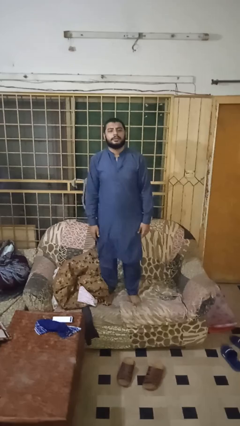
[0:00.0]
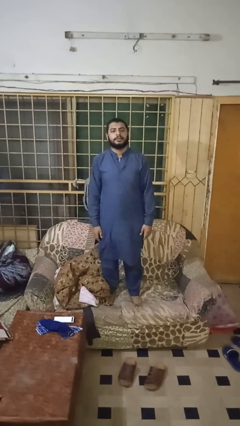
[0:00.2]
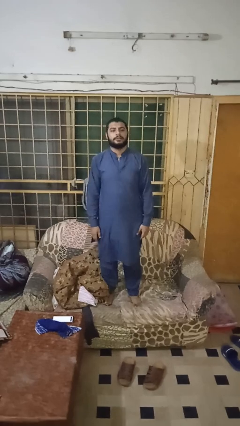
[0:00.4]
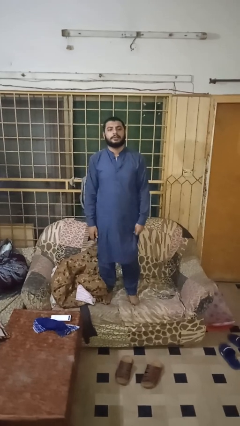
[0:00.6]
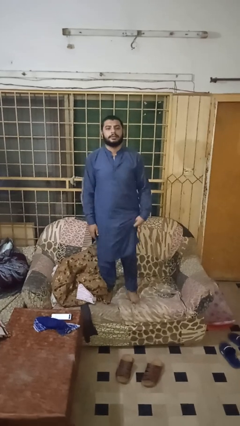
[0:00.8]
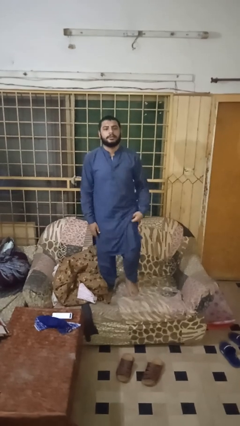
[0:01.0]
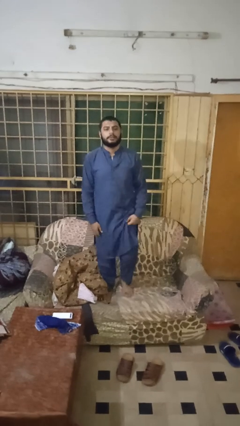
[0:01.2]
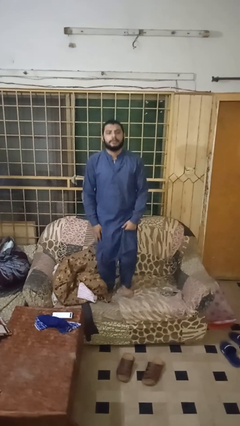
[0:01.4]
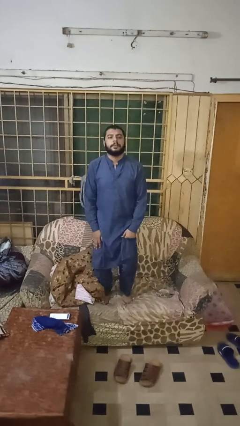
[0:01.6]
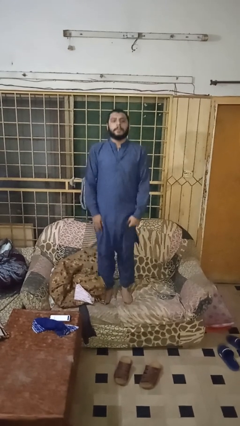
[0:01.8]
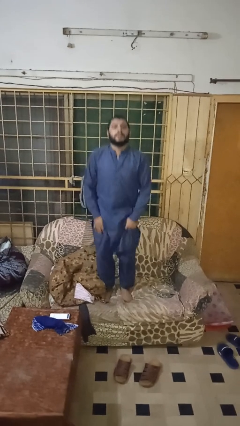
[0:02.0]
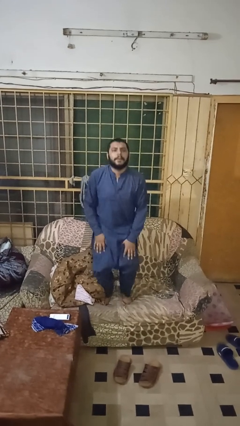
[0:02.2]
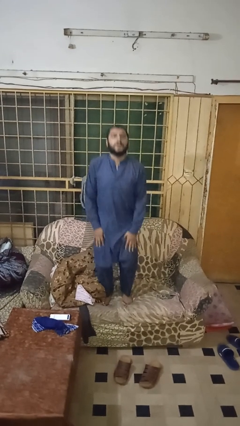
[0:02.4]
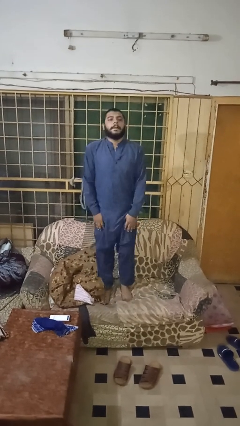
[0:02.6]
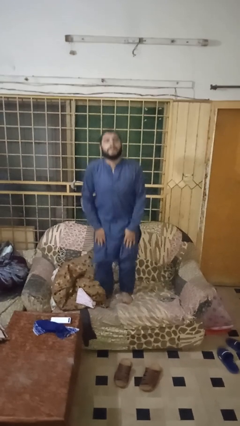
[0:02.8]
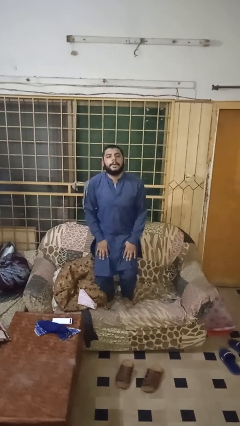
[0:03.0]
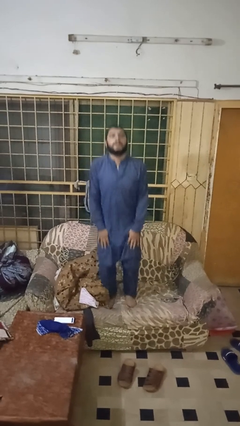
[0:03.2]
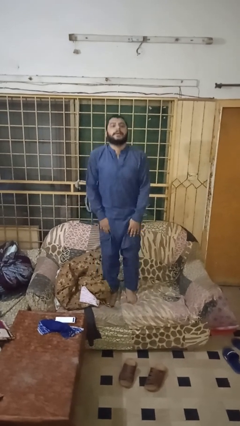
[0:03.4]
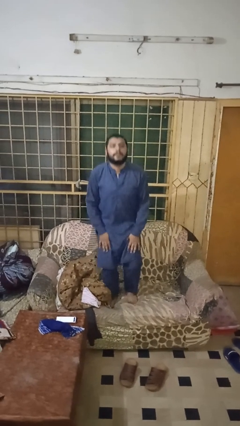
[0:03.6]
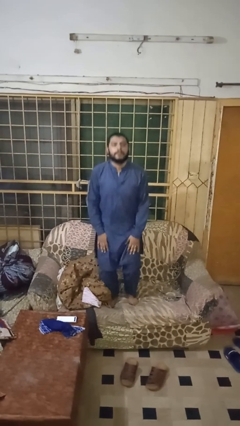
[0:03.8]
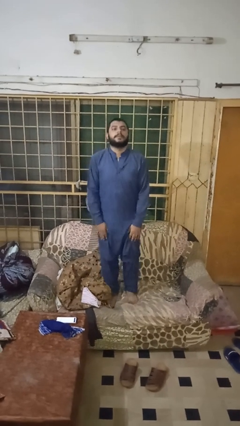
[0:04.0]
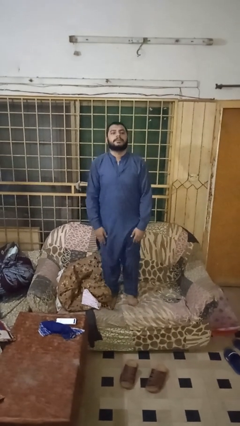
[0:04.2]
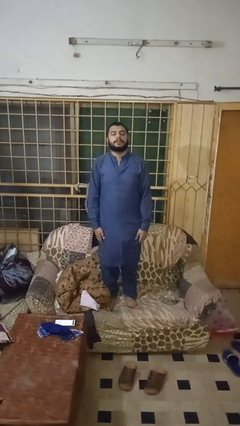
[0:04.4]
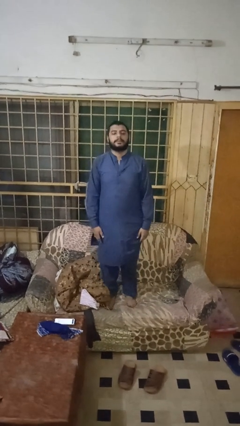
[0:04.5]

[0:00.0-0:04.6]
person jumps on couch

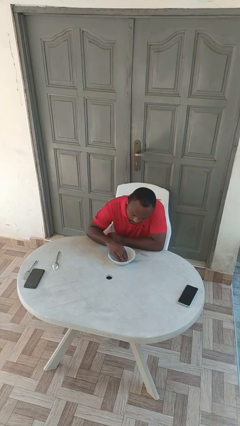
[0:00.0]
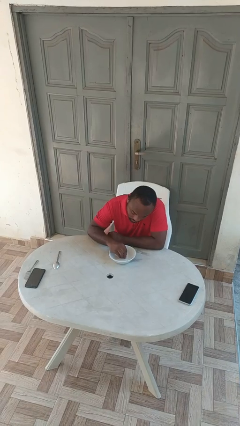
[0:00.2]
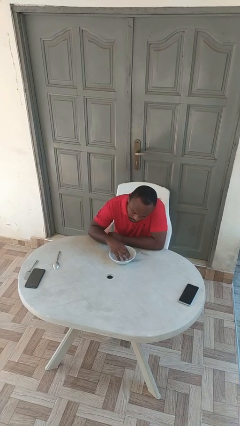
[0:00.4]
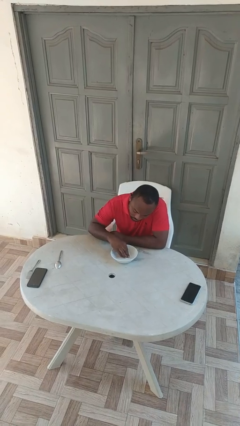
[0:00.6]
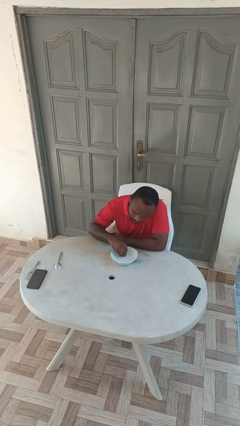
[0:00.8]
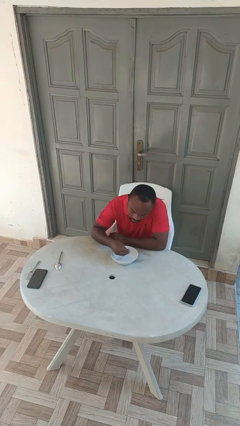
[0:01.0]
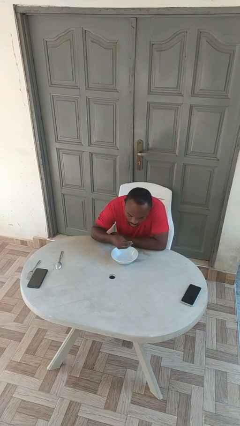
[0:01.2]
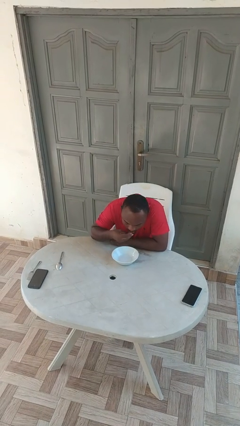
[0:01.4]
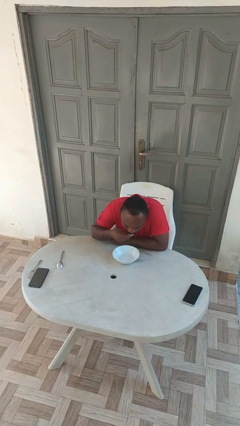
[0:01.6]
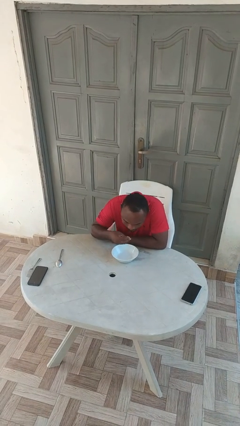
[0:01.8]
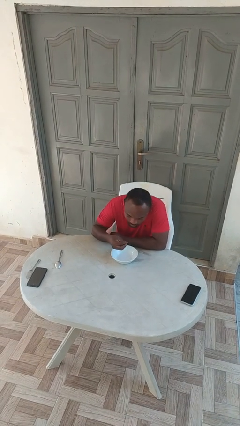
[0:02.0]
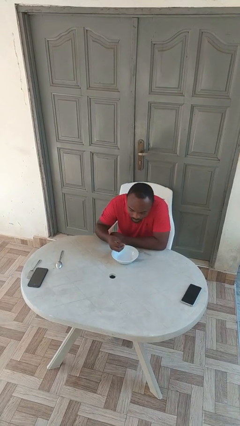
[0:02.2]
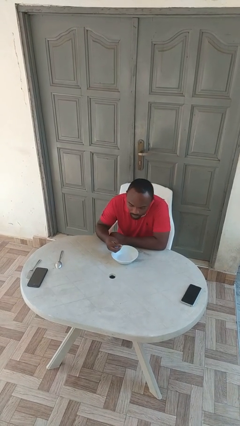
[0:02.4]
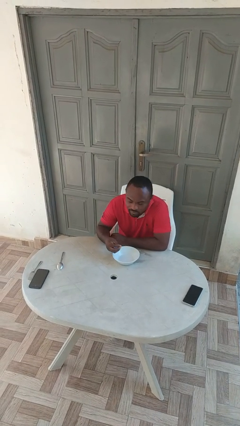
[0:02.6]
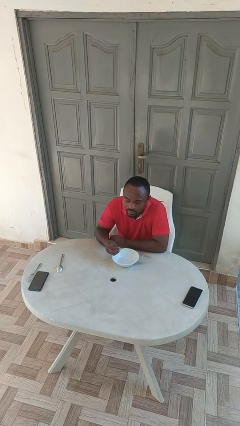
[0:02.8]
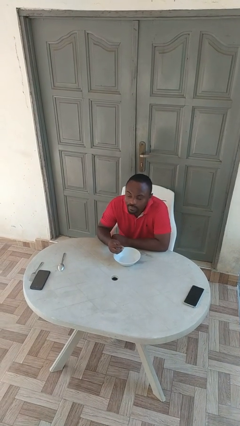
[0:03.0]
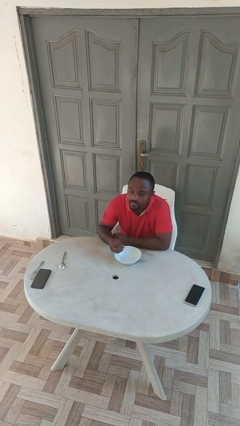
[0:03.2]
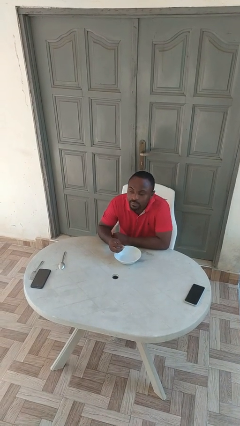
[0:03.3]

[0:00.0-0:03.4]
person eats with hands

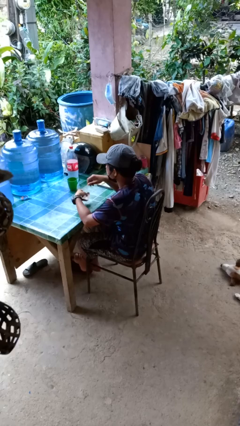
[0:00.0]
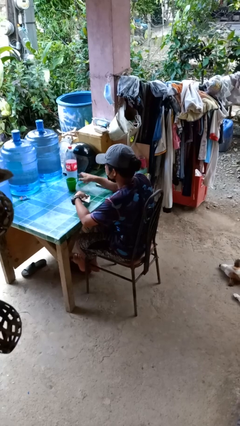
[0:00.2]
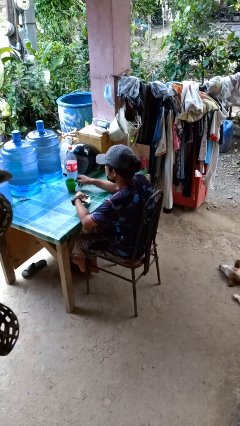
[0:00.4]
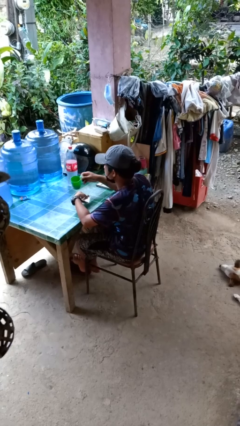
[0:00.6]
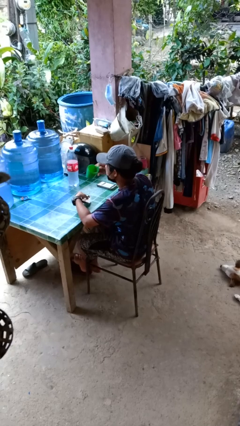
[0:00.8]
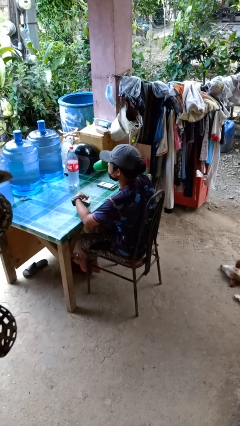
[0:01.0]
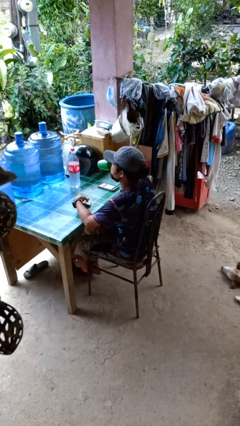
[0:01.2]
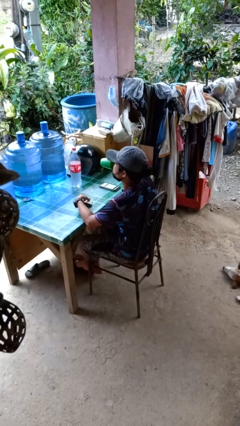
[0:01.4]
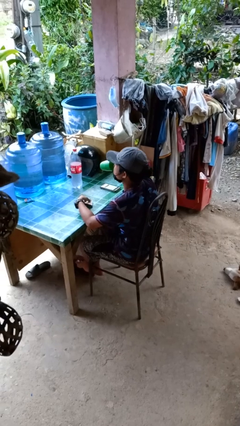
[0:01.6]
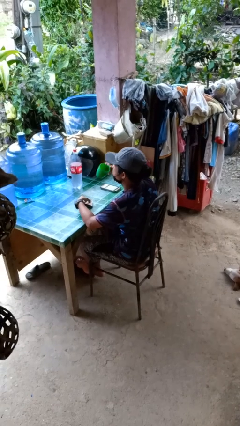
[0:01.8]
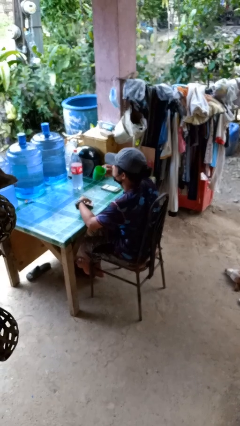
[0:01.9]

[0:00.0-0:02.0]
person drinks from cup

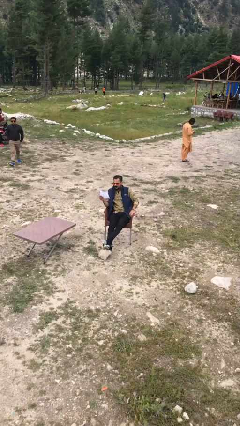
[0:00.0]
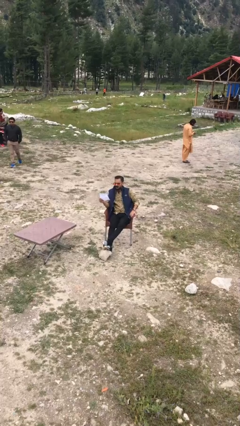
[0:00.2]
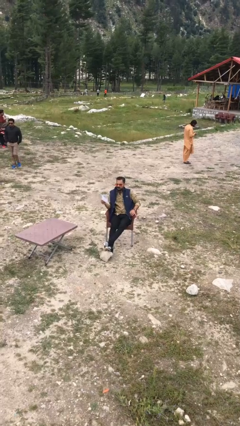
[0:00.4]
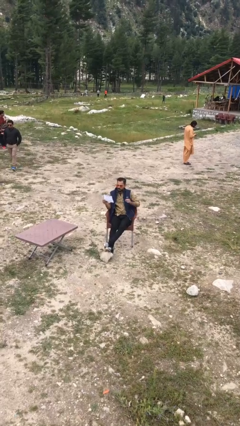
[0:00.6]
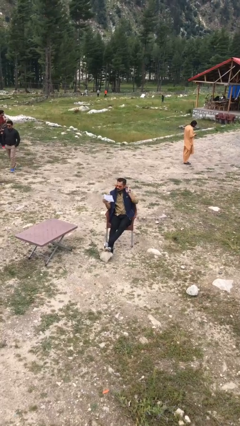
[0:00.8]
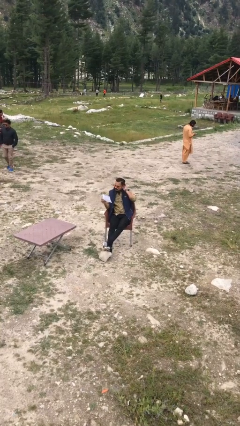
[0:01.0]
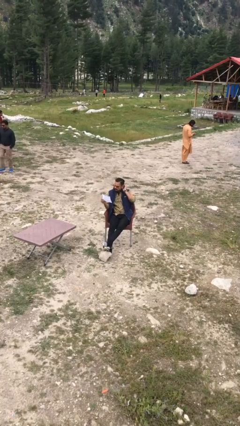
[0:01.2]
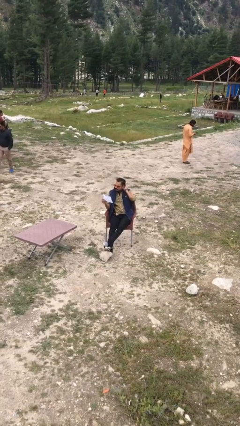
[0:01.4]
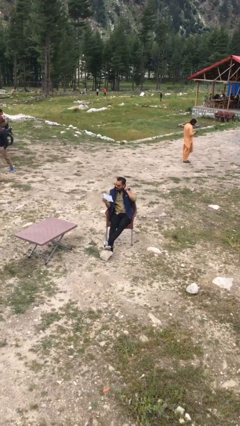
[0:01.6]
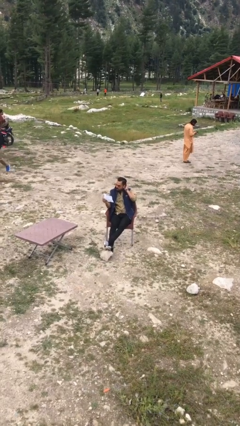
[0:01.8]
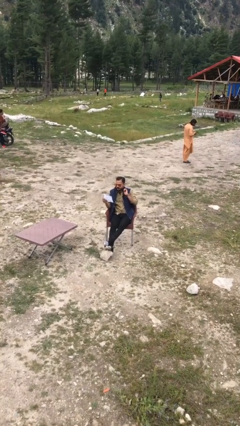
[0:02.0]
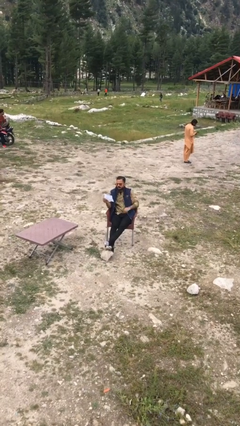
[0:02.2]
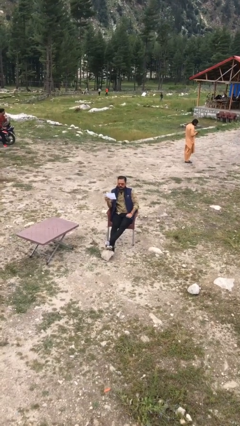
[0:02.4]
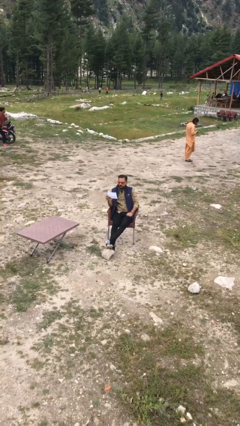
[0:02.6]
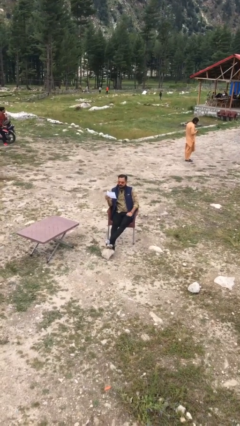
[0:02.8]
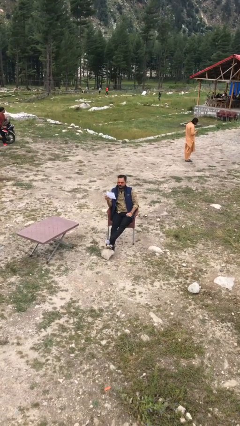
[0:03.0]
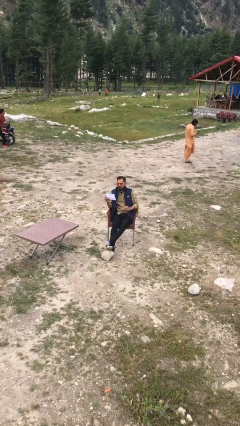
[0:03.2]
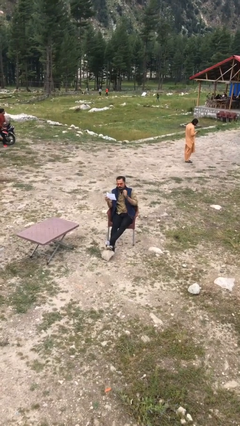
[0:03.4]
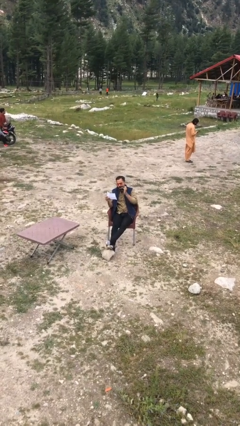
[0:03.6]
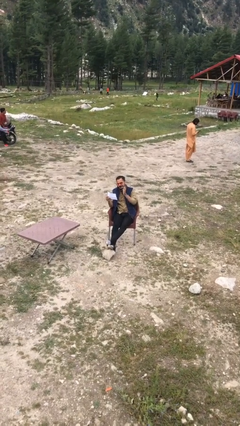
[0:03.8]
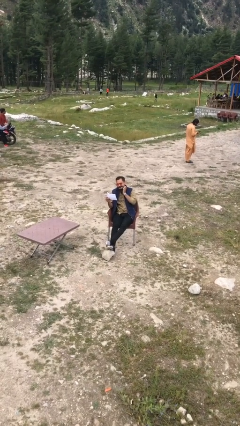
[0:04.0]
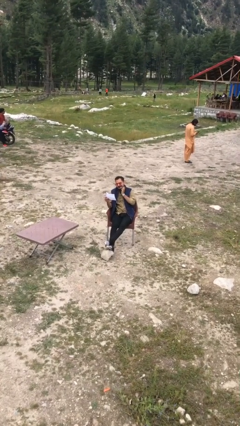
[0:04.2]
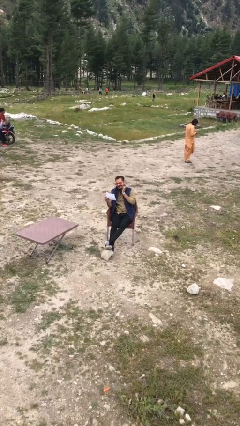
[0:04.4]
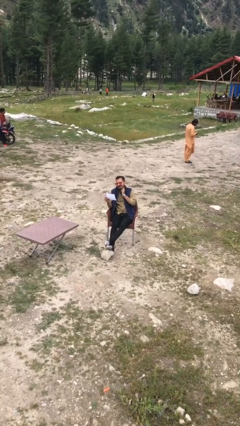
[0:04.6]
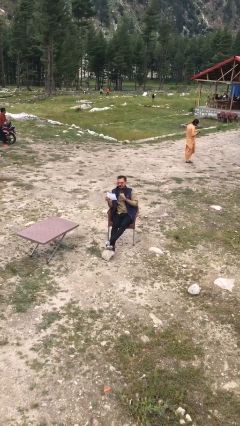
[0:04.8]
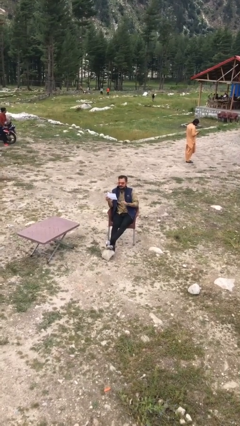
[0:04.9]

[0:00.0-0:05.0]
person reads document

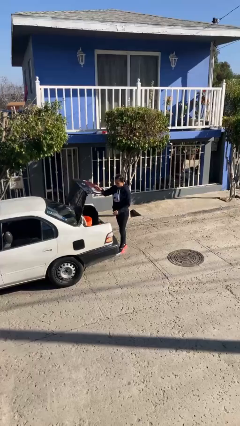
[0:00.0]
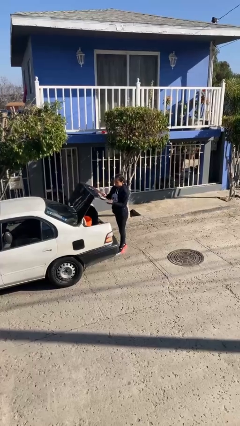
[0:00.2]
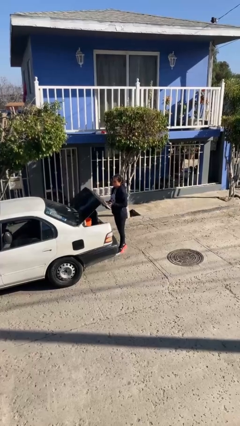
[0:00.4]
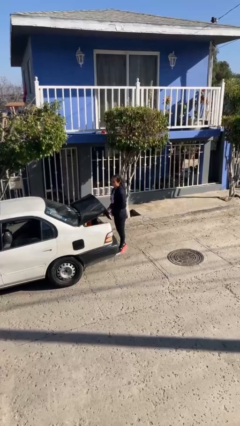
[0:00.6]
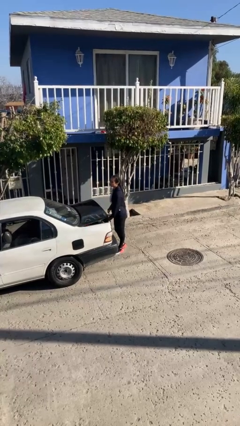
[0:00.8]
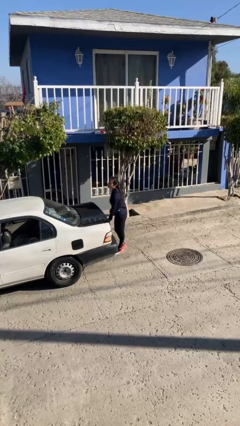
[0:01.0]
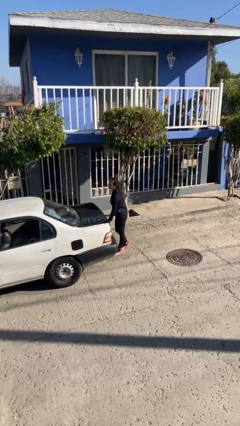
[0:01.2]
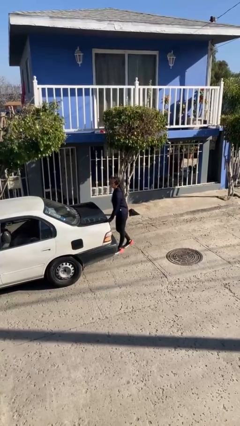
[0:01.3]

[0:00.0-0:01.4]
person closes car trunk

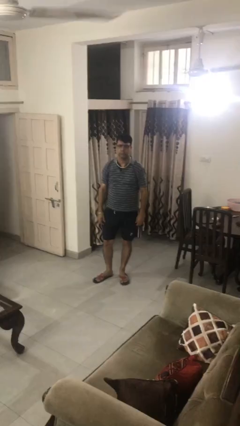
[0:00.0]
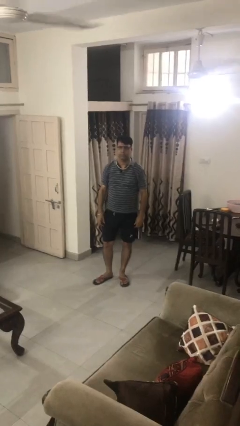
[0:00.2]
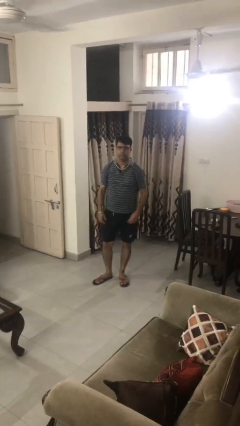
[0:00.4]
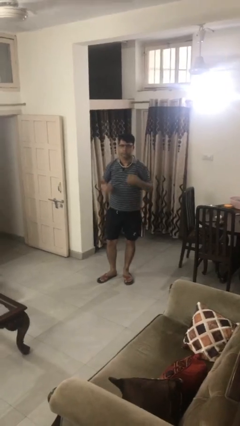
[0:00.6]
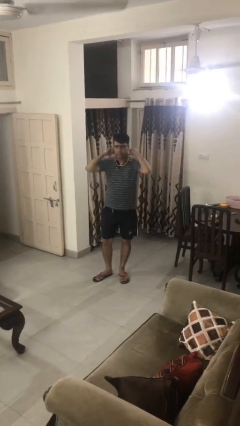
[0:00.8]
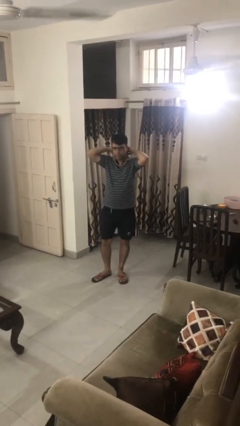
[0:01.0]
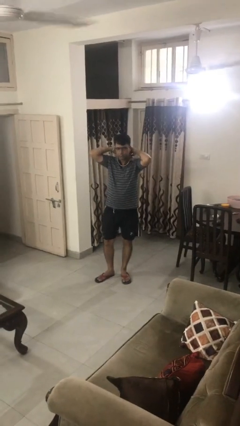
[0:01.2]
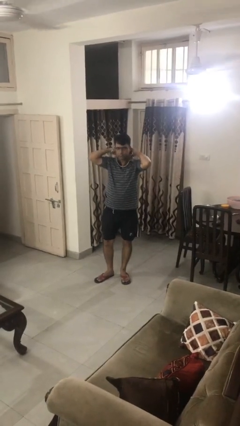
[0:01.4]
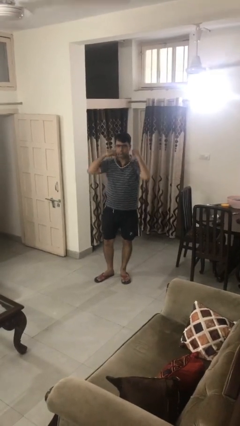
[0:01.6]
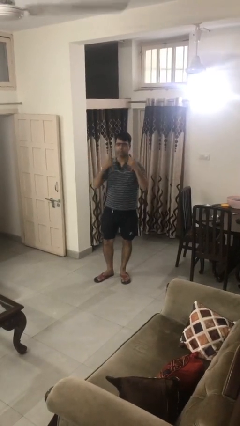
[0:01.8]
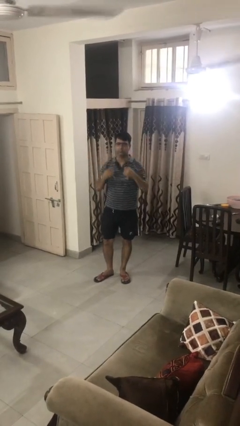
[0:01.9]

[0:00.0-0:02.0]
person takes off necklace
